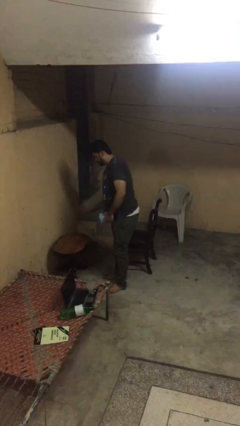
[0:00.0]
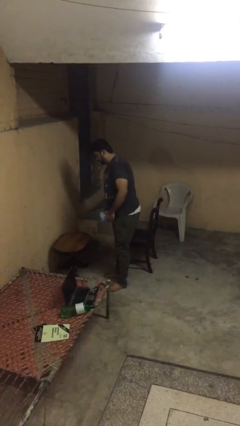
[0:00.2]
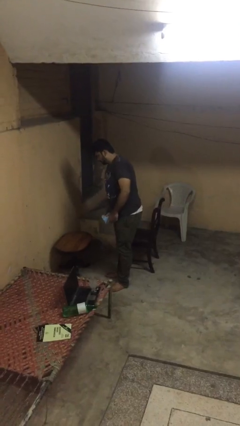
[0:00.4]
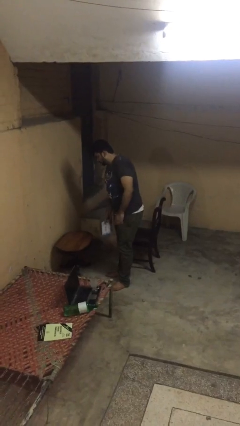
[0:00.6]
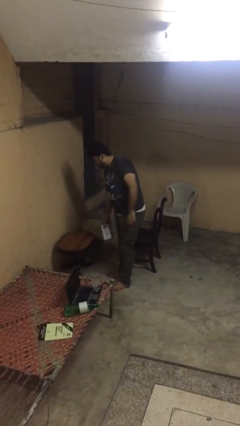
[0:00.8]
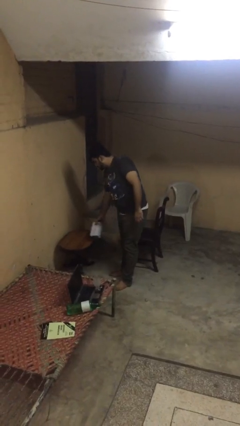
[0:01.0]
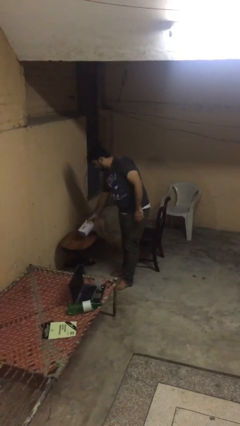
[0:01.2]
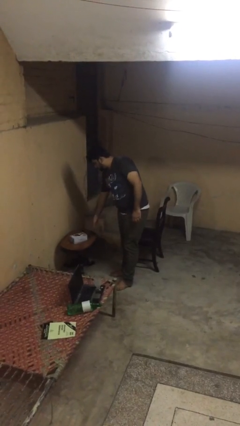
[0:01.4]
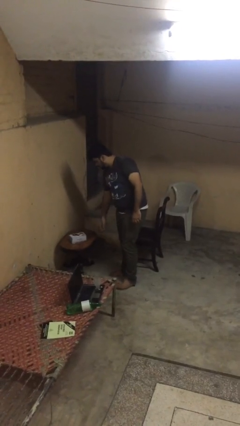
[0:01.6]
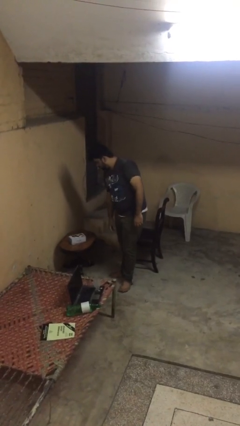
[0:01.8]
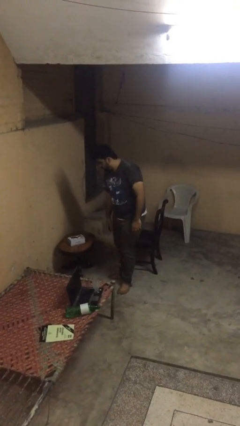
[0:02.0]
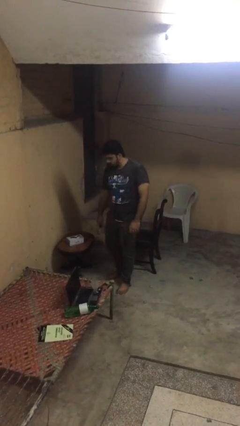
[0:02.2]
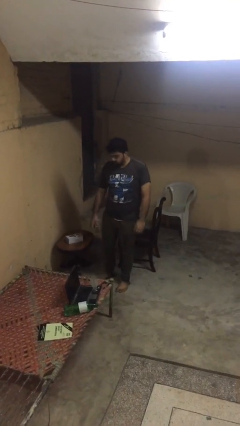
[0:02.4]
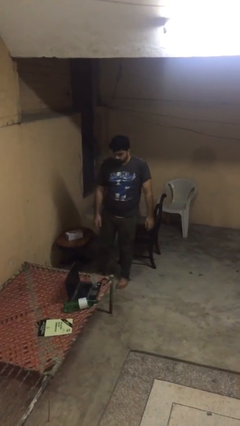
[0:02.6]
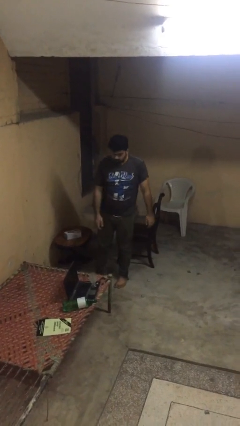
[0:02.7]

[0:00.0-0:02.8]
person puts down object on table

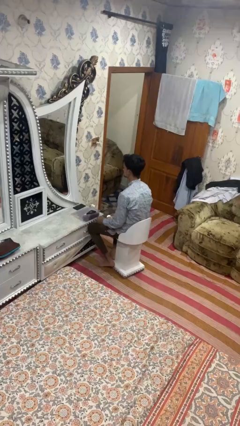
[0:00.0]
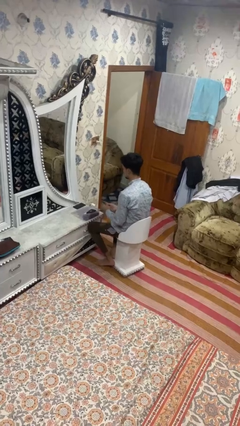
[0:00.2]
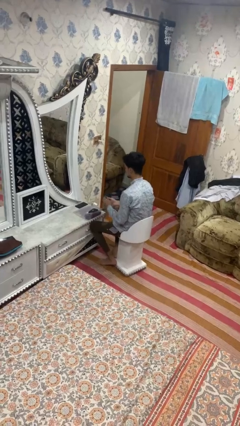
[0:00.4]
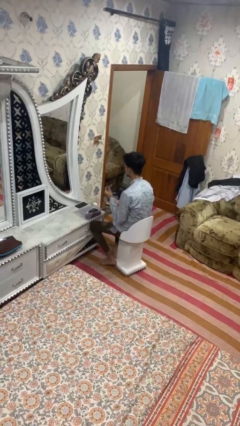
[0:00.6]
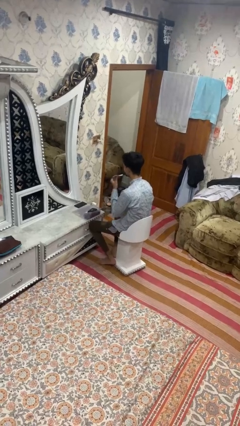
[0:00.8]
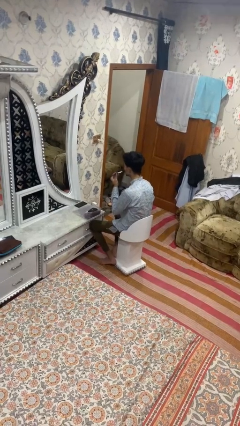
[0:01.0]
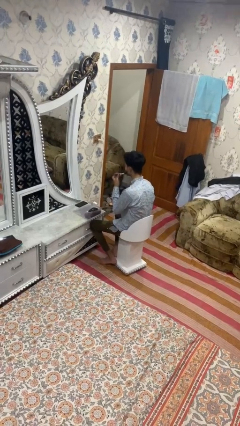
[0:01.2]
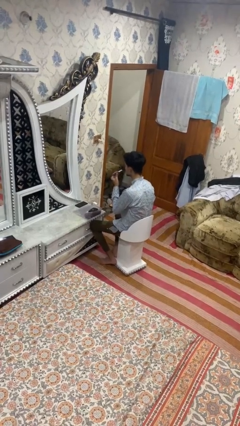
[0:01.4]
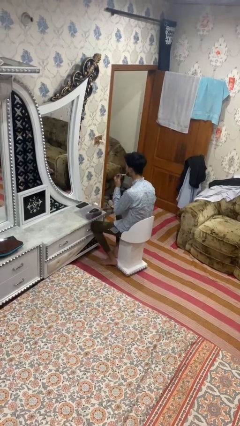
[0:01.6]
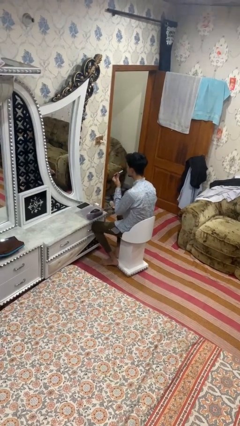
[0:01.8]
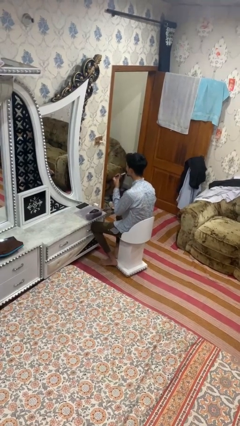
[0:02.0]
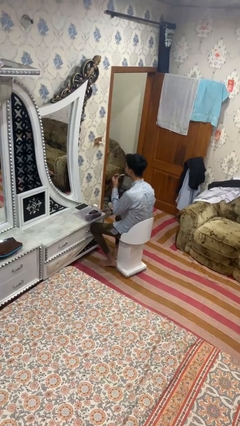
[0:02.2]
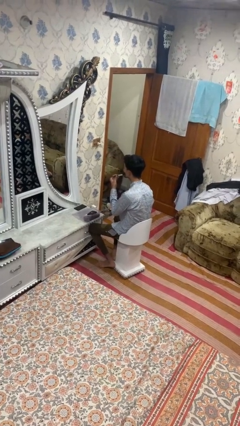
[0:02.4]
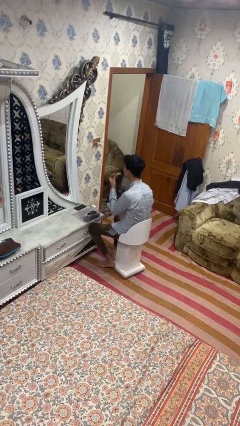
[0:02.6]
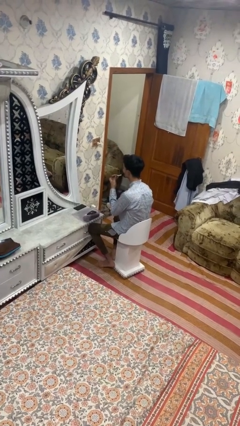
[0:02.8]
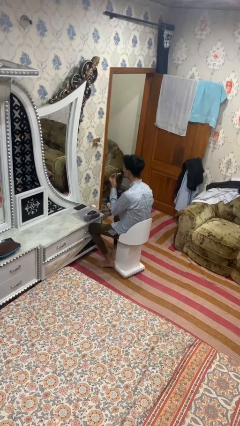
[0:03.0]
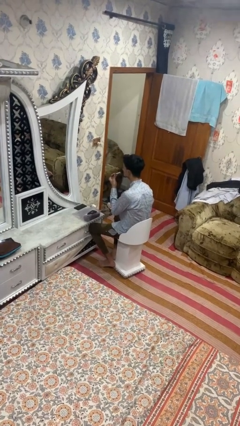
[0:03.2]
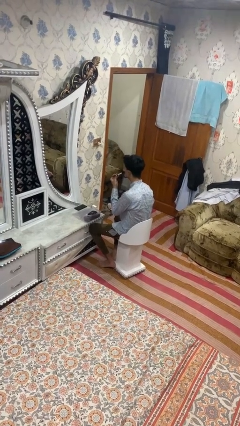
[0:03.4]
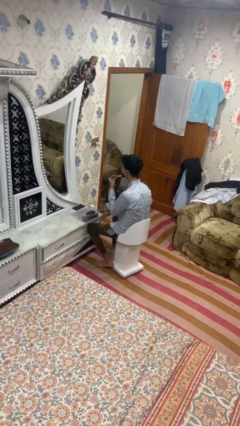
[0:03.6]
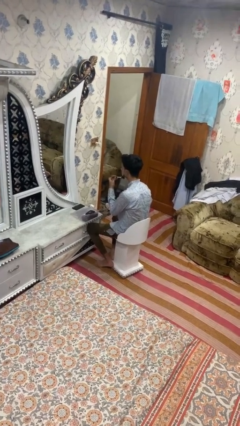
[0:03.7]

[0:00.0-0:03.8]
person applies foundation makeup

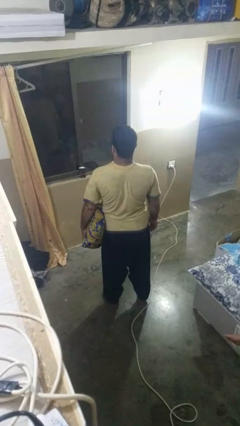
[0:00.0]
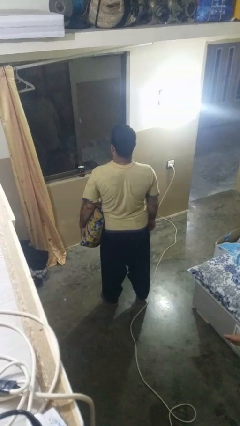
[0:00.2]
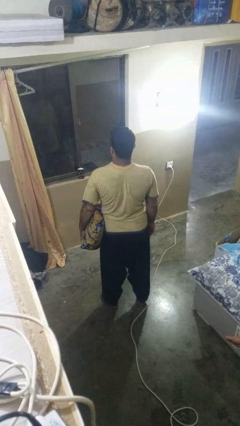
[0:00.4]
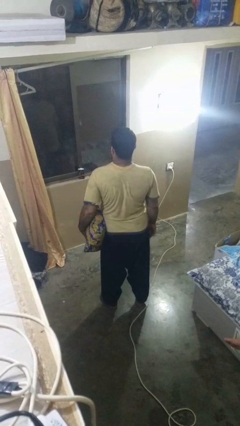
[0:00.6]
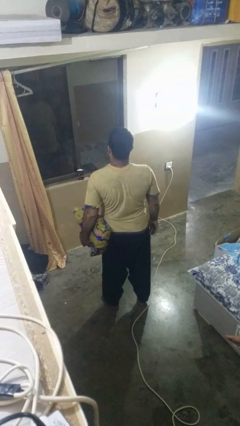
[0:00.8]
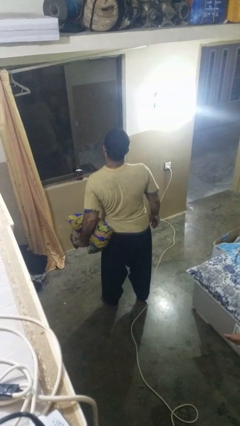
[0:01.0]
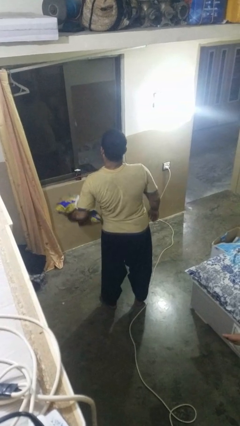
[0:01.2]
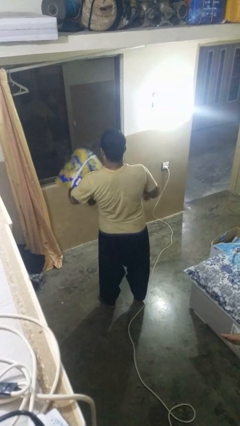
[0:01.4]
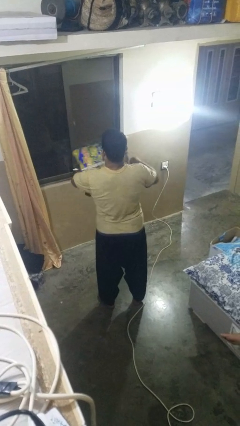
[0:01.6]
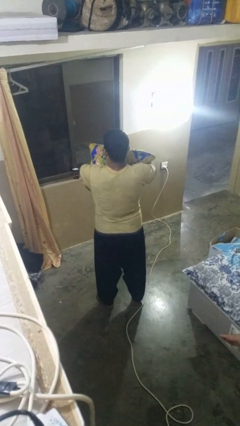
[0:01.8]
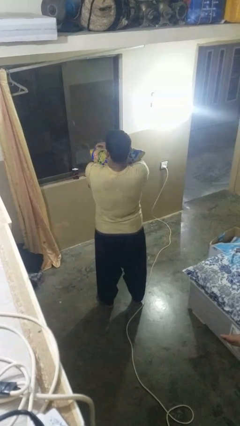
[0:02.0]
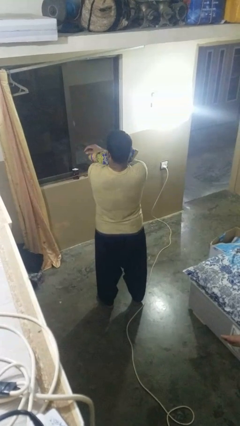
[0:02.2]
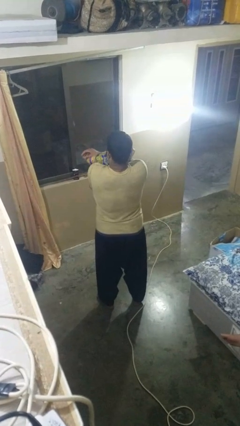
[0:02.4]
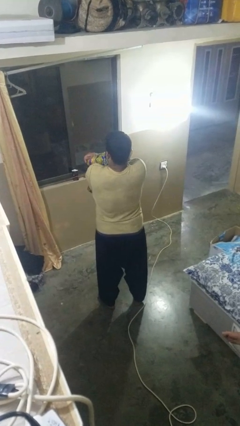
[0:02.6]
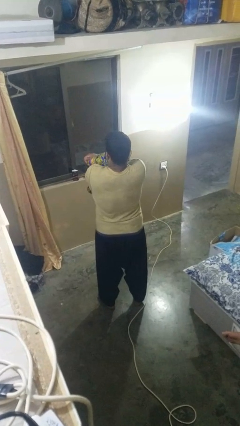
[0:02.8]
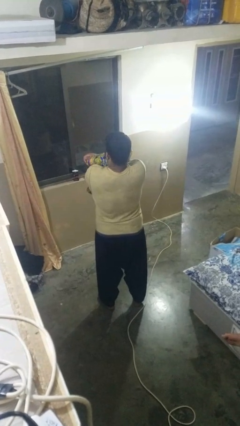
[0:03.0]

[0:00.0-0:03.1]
person squeezes object

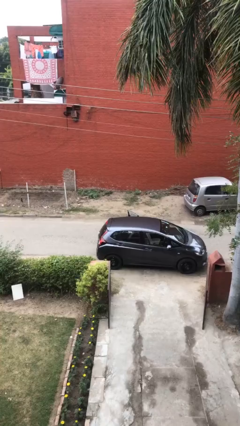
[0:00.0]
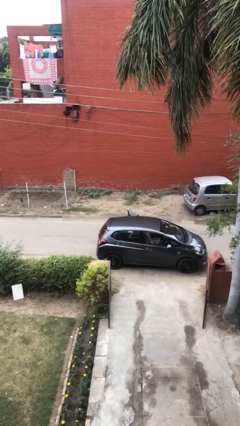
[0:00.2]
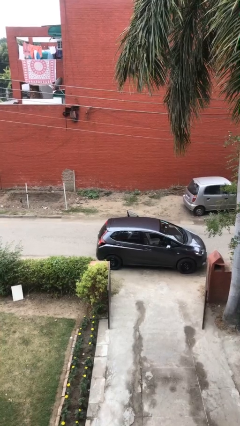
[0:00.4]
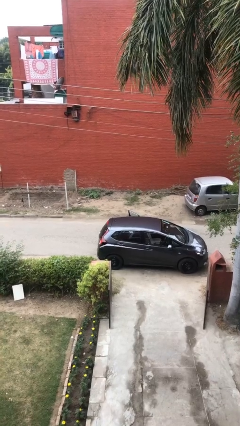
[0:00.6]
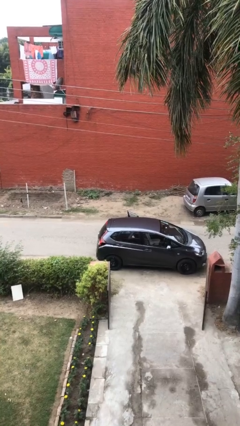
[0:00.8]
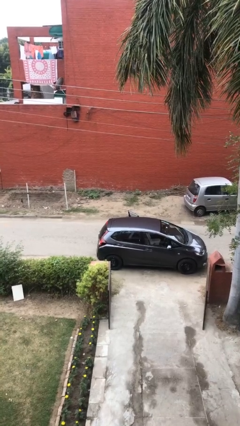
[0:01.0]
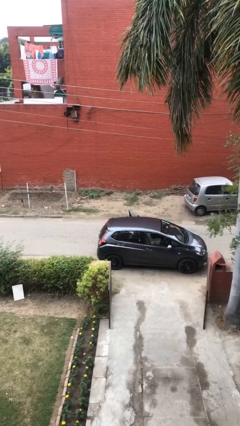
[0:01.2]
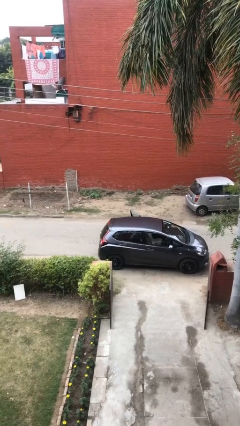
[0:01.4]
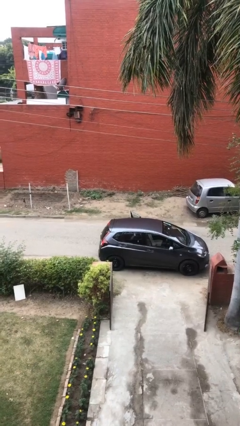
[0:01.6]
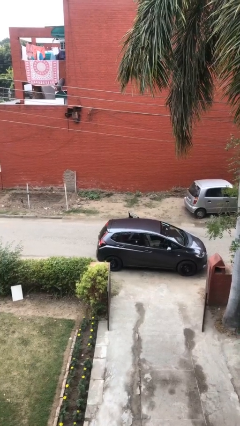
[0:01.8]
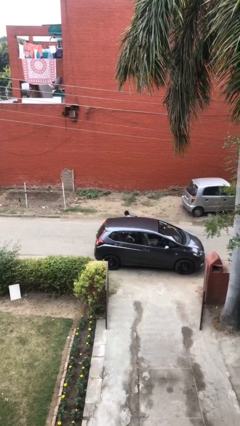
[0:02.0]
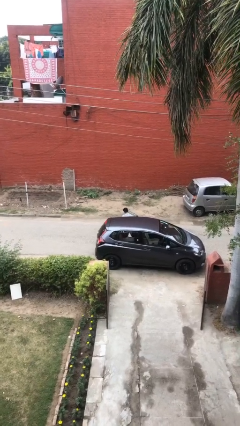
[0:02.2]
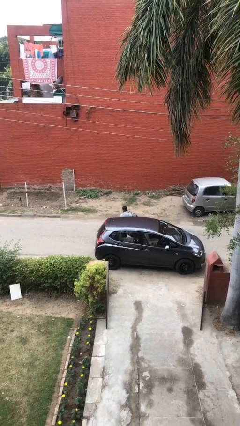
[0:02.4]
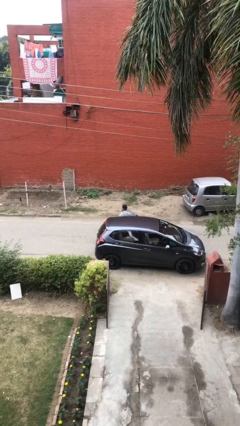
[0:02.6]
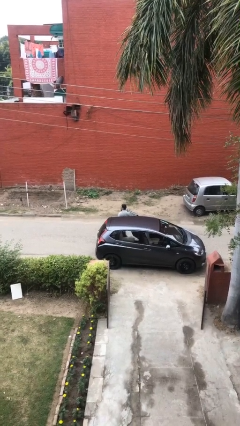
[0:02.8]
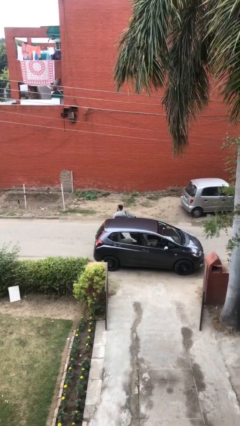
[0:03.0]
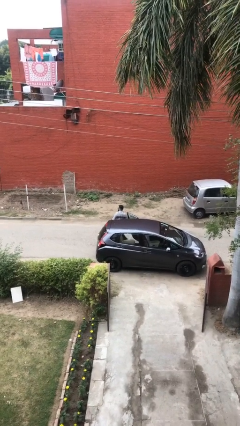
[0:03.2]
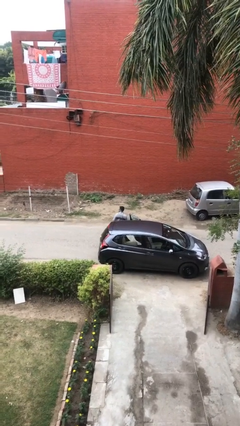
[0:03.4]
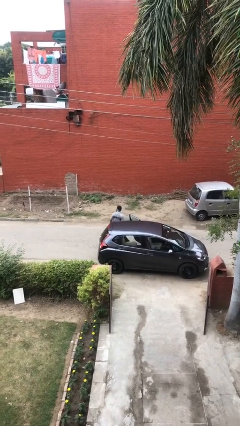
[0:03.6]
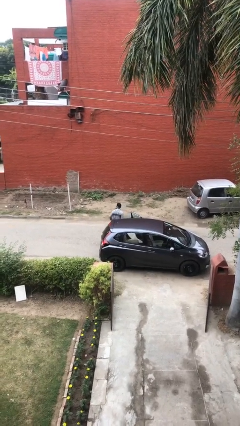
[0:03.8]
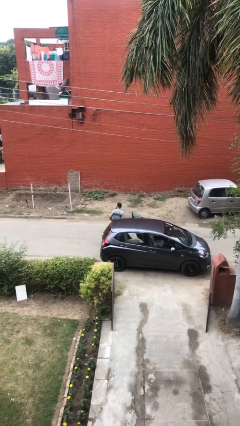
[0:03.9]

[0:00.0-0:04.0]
person exits car

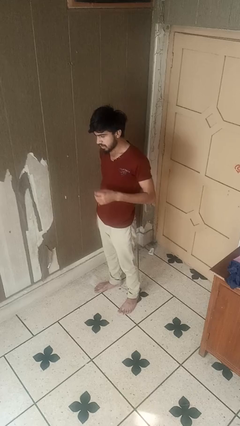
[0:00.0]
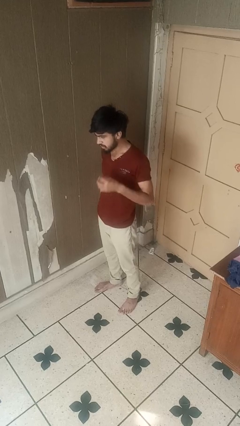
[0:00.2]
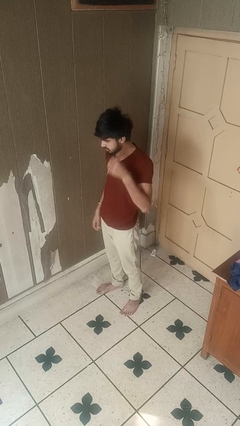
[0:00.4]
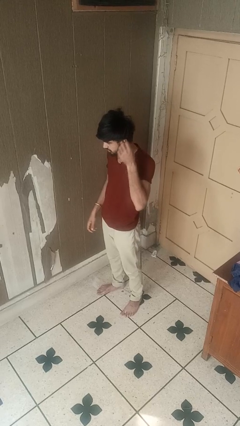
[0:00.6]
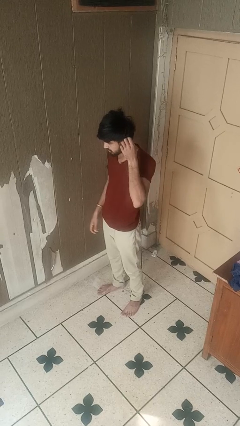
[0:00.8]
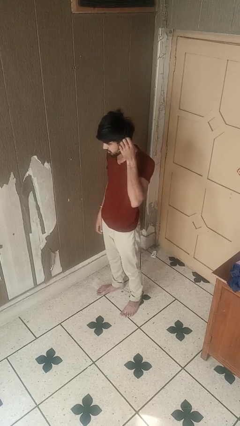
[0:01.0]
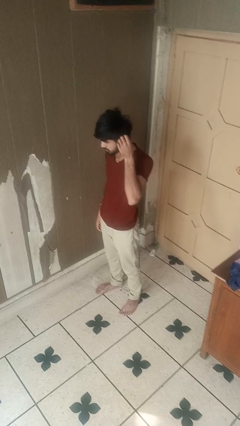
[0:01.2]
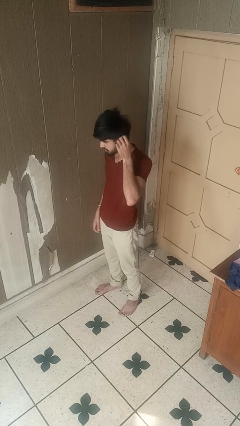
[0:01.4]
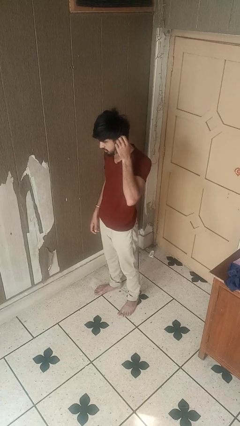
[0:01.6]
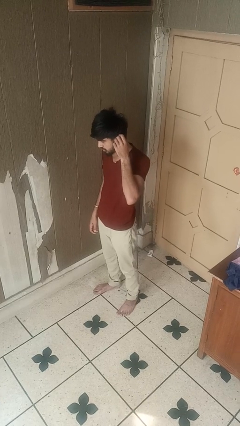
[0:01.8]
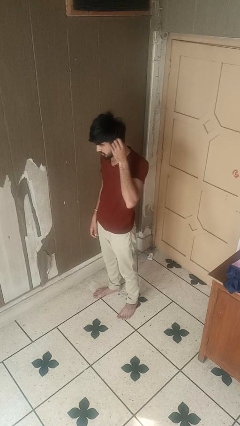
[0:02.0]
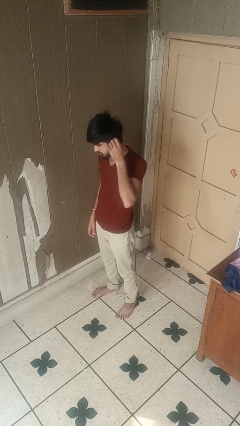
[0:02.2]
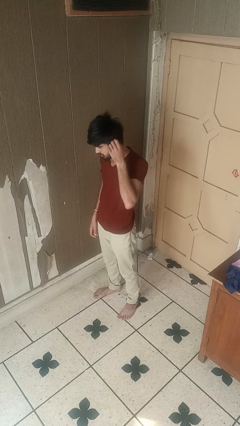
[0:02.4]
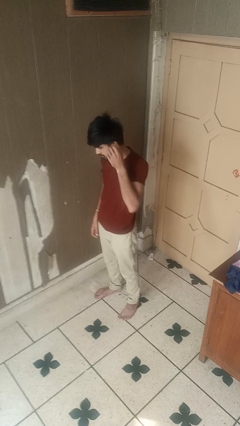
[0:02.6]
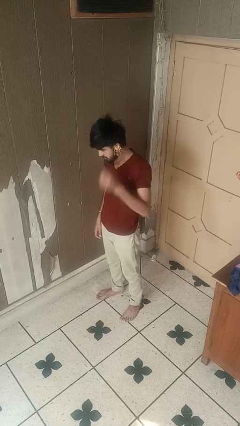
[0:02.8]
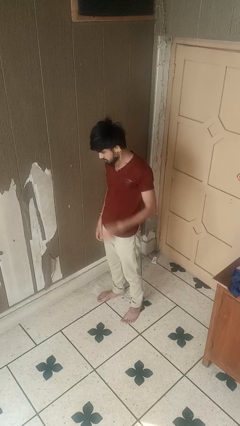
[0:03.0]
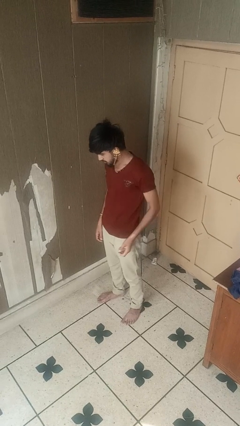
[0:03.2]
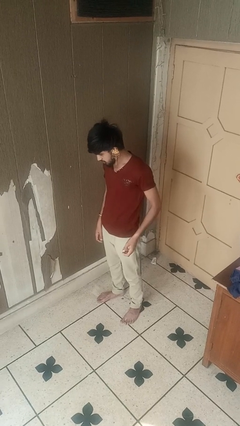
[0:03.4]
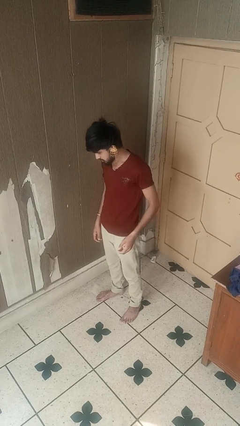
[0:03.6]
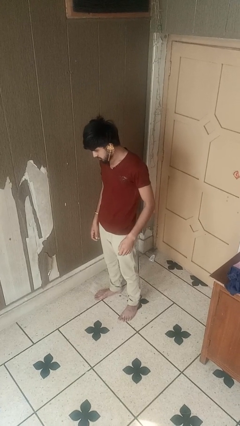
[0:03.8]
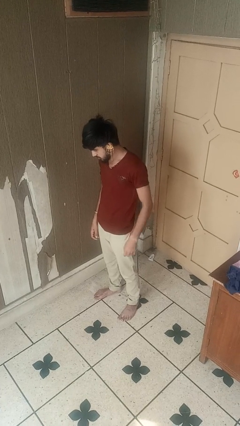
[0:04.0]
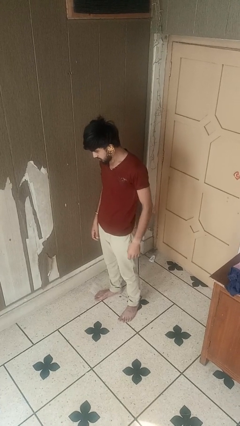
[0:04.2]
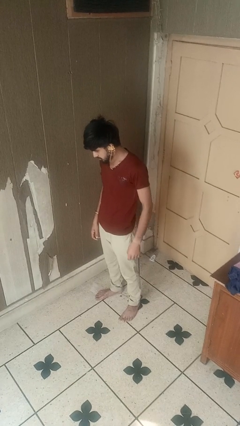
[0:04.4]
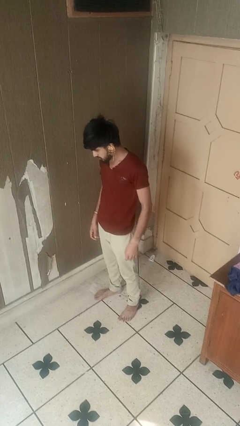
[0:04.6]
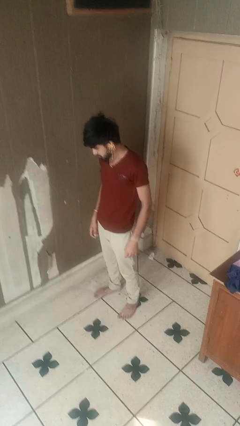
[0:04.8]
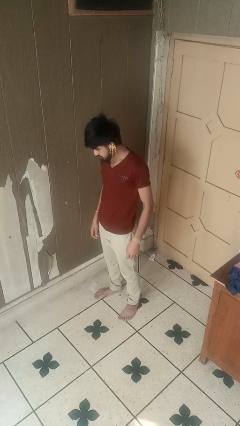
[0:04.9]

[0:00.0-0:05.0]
person puts on earrings
